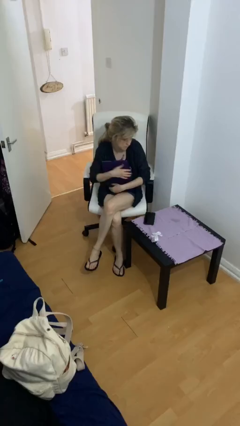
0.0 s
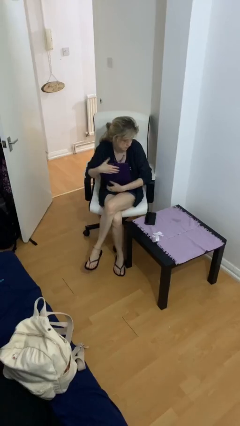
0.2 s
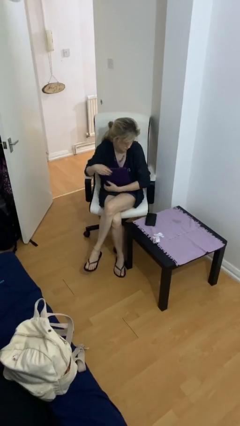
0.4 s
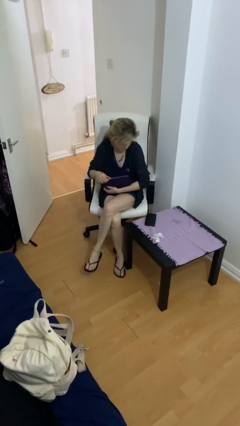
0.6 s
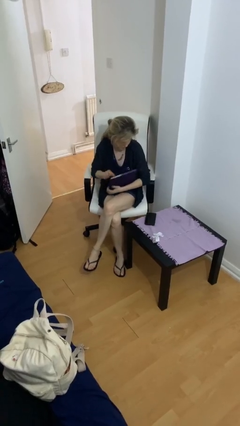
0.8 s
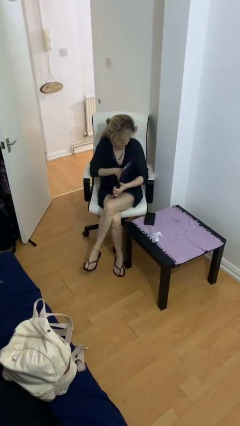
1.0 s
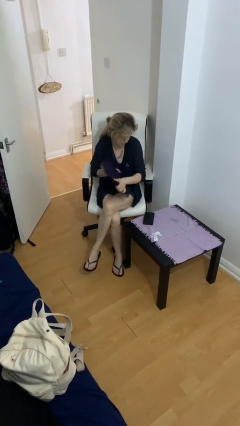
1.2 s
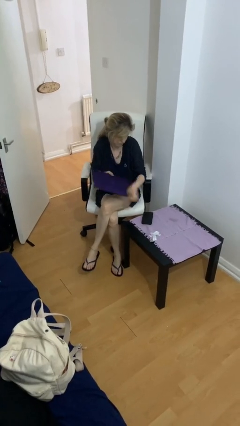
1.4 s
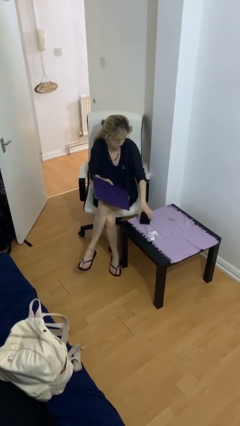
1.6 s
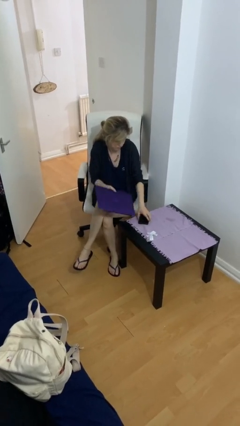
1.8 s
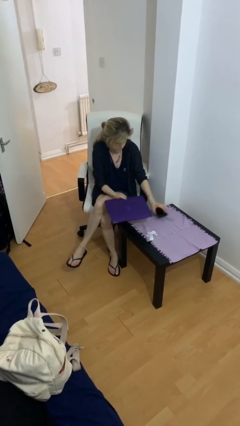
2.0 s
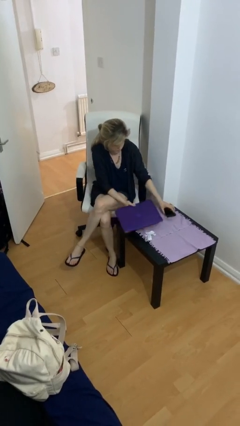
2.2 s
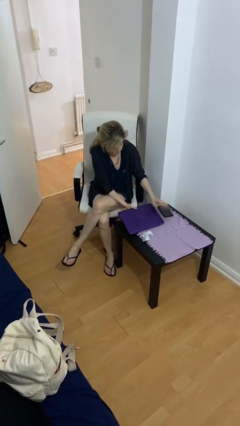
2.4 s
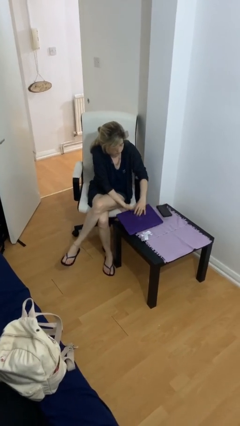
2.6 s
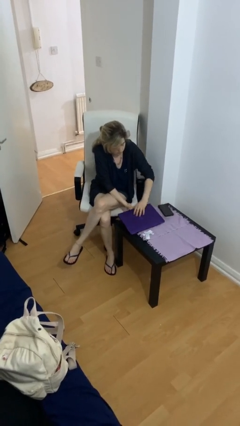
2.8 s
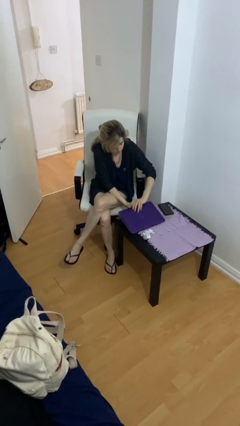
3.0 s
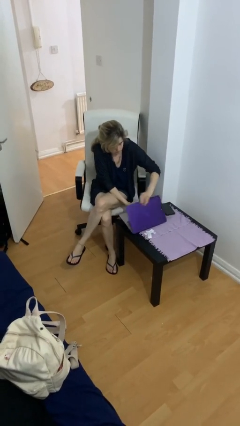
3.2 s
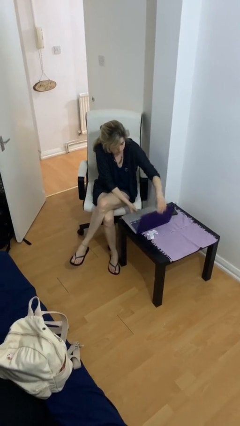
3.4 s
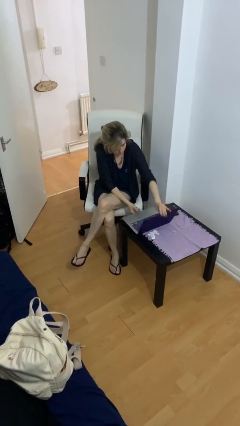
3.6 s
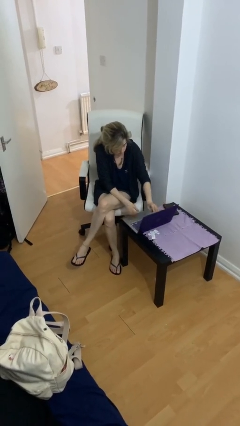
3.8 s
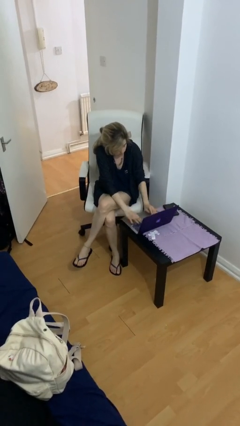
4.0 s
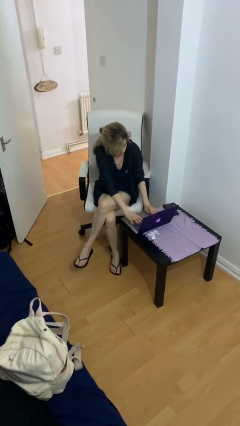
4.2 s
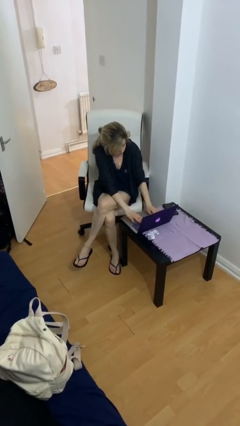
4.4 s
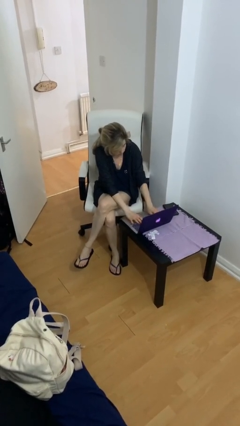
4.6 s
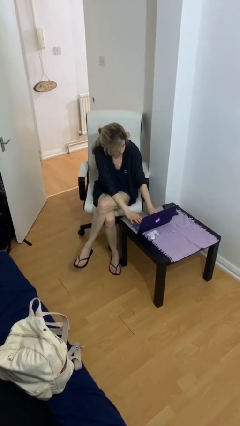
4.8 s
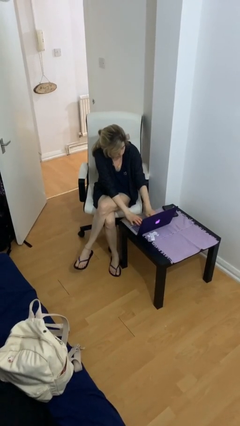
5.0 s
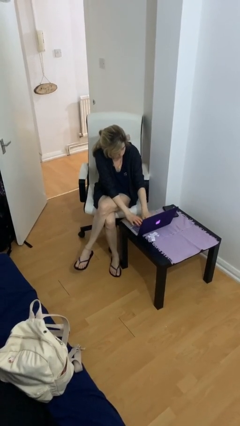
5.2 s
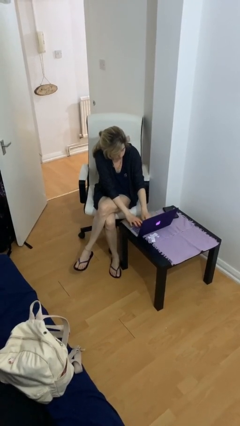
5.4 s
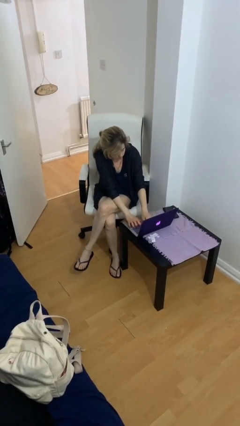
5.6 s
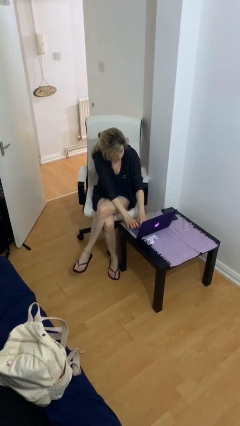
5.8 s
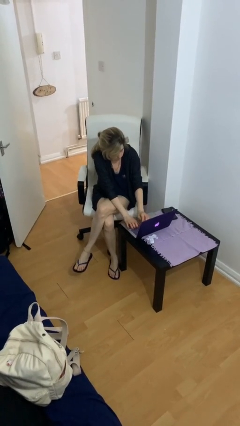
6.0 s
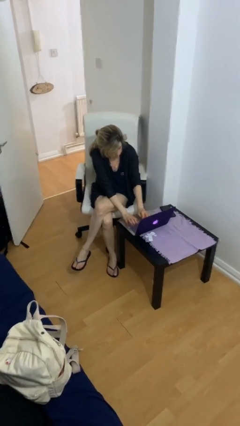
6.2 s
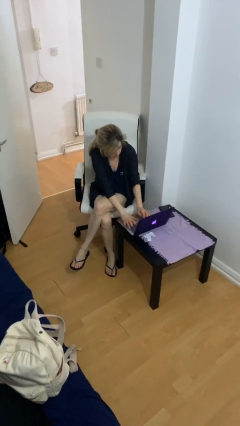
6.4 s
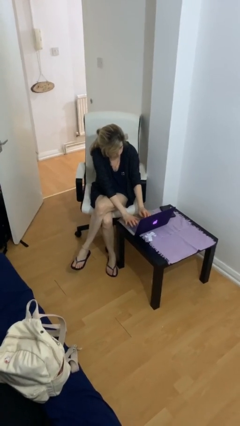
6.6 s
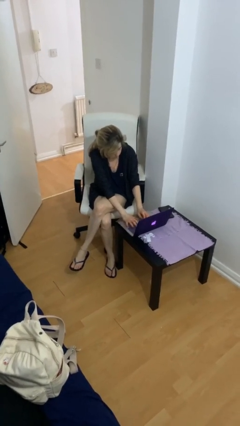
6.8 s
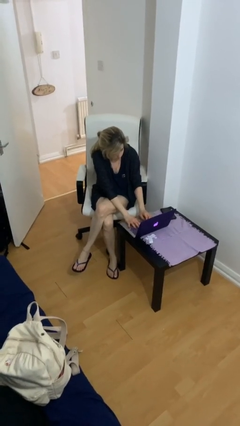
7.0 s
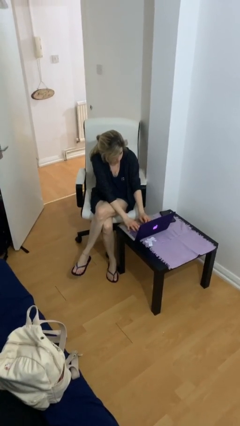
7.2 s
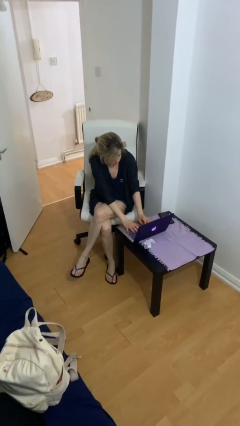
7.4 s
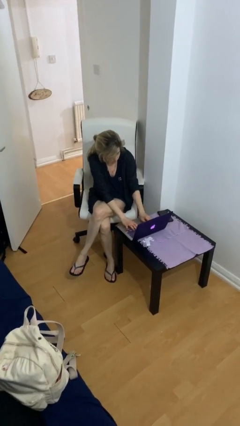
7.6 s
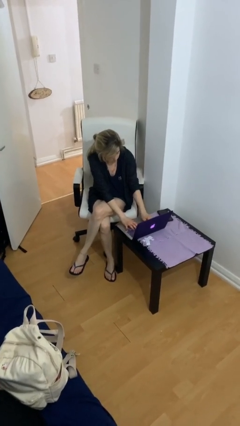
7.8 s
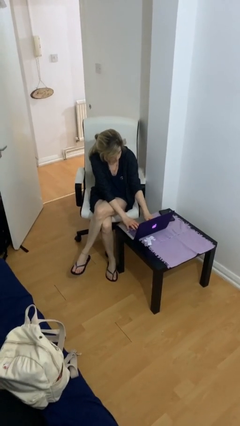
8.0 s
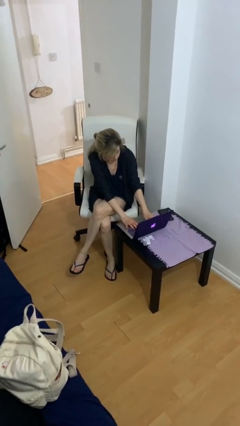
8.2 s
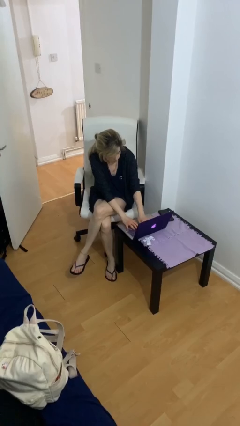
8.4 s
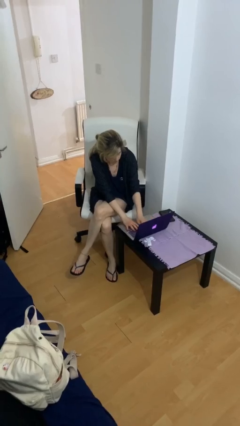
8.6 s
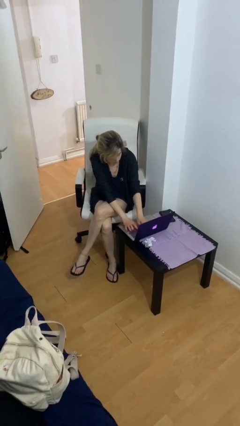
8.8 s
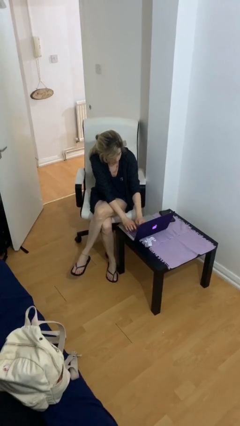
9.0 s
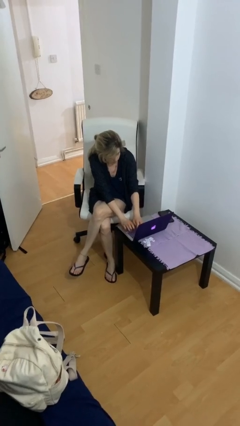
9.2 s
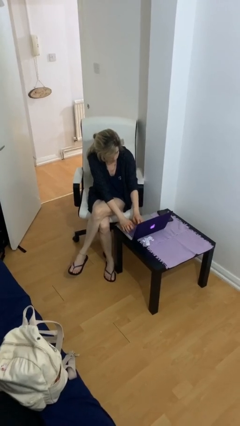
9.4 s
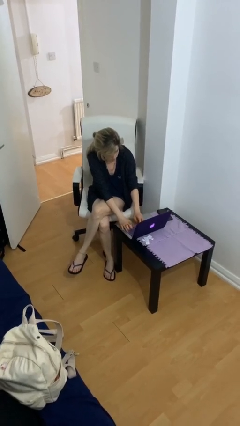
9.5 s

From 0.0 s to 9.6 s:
person interacts with laptop

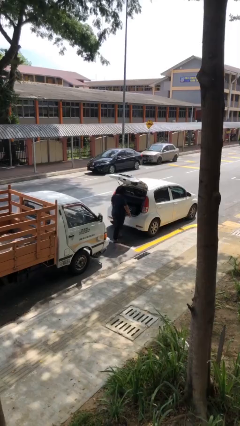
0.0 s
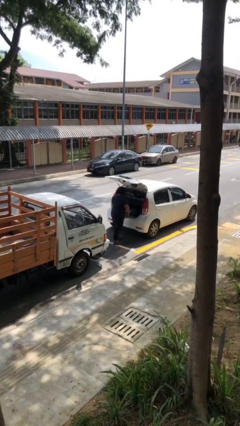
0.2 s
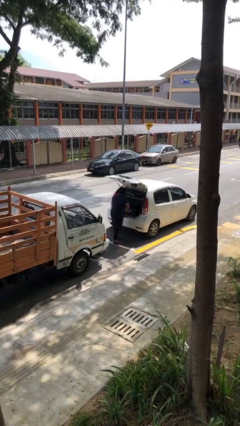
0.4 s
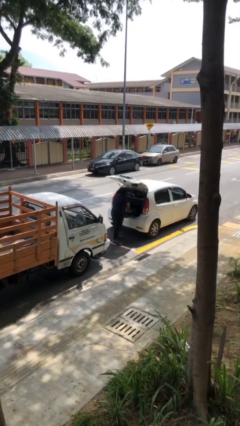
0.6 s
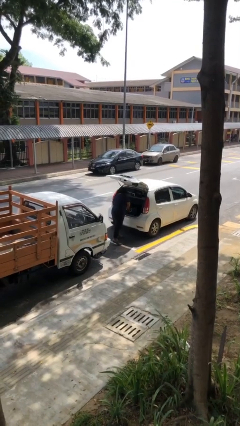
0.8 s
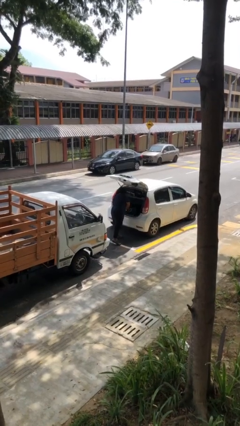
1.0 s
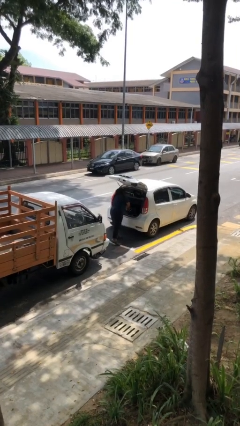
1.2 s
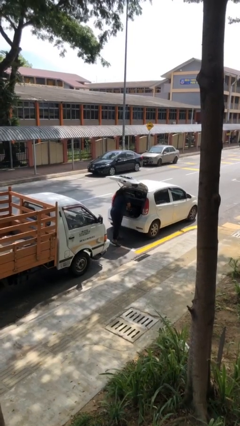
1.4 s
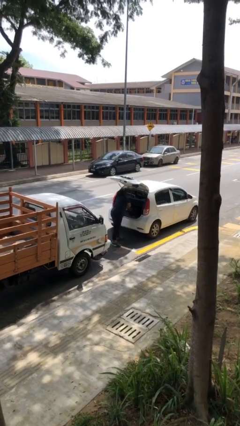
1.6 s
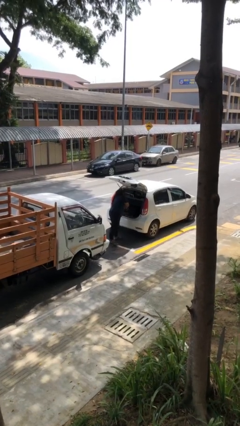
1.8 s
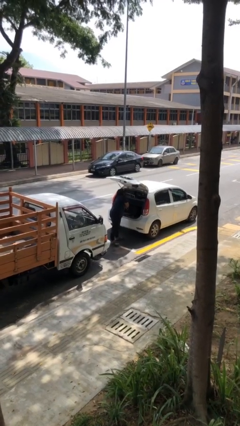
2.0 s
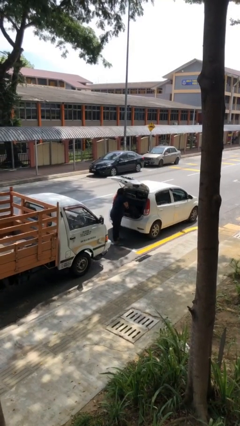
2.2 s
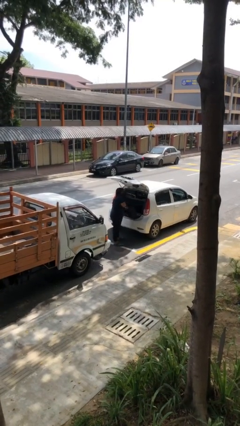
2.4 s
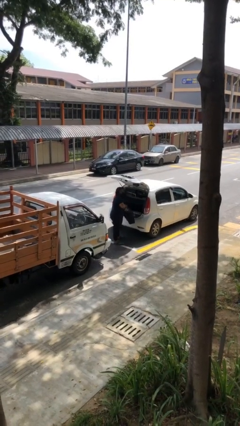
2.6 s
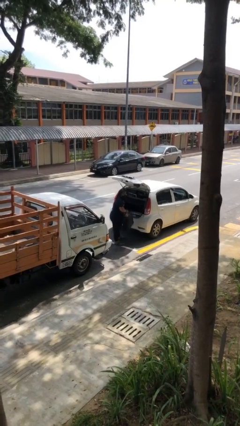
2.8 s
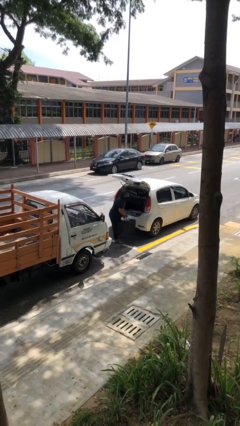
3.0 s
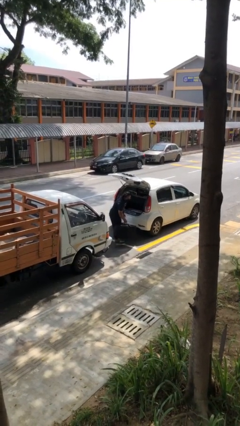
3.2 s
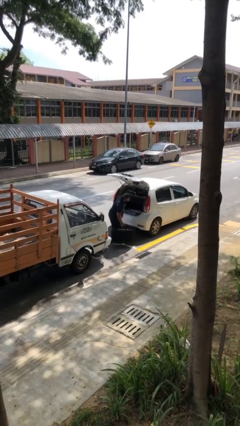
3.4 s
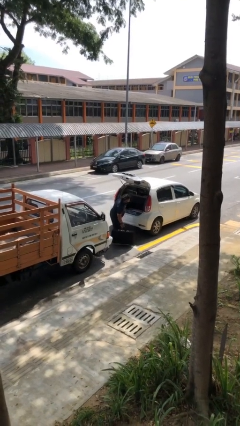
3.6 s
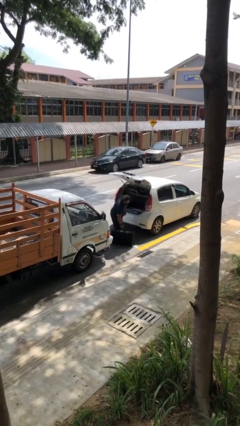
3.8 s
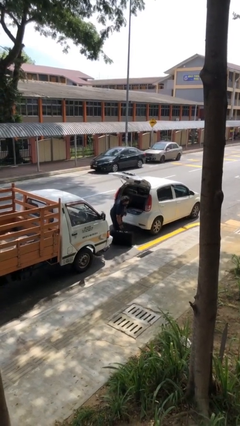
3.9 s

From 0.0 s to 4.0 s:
person unloads car

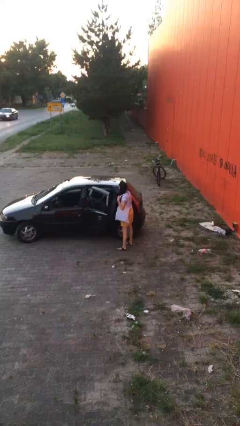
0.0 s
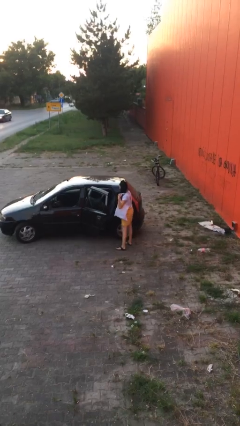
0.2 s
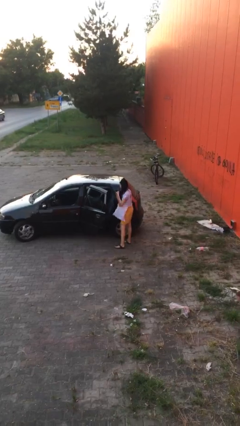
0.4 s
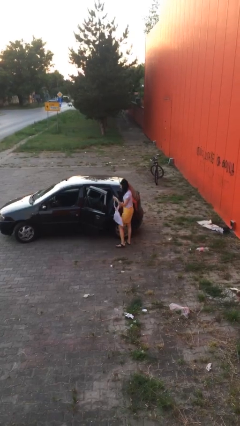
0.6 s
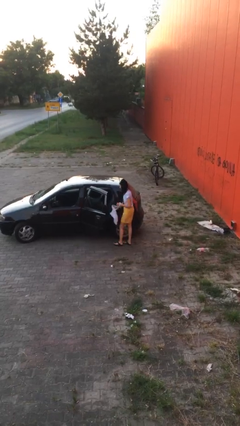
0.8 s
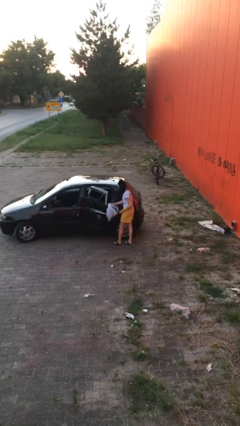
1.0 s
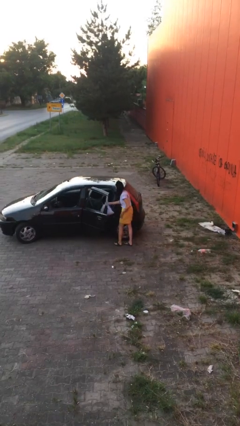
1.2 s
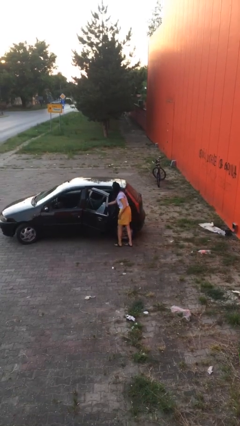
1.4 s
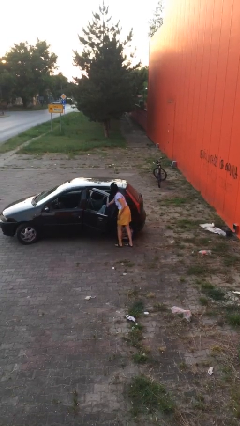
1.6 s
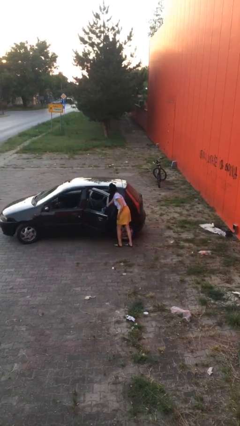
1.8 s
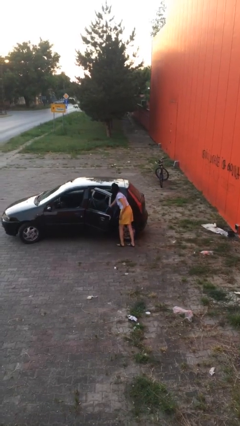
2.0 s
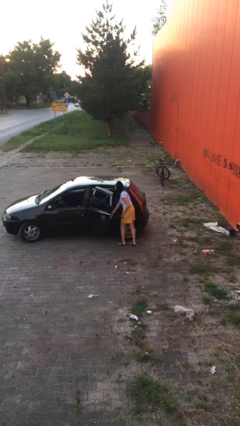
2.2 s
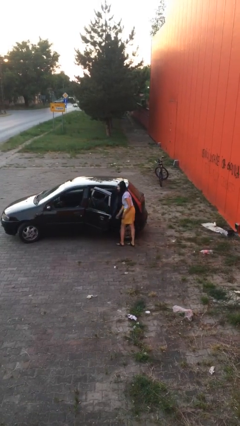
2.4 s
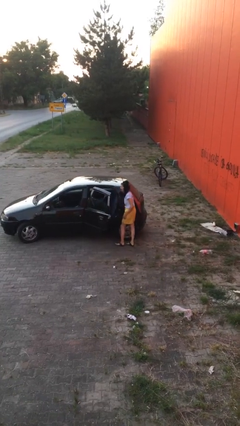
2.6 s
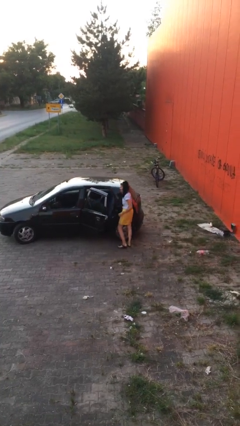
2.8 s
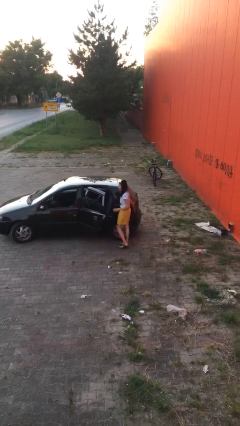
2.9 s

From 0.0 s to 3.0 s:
person loads car

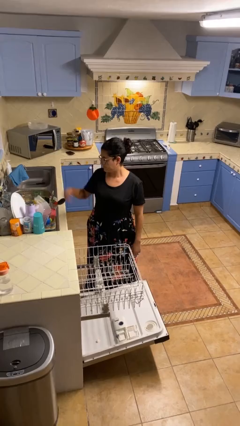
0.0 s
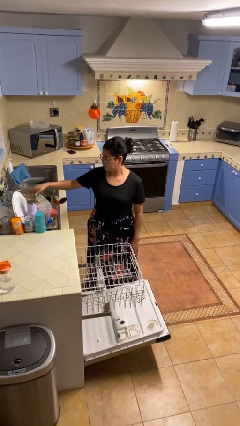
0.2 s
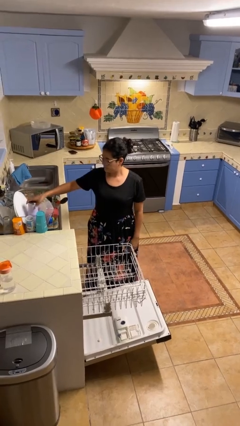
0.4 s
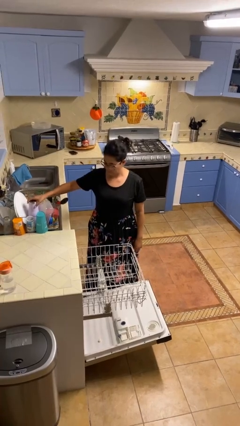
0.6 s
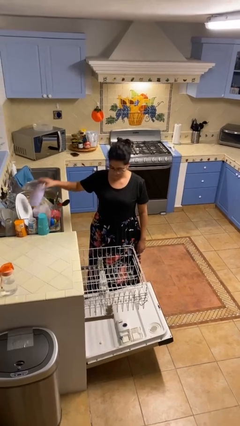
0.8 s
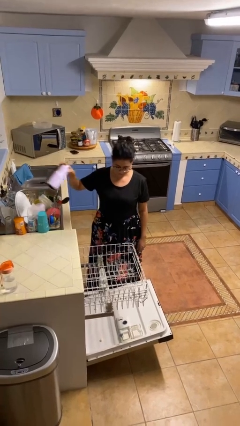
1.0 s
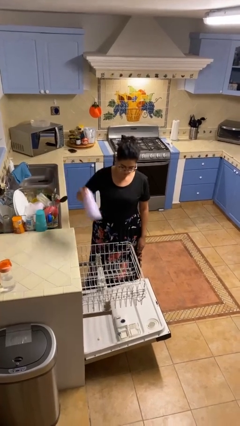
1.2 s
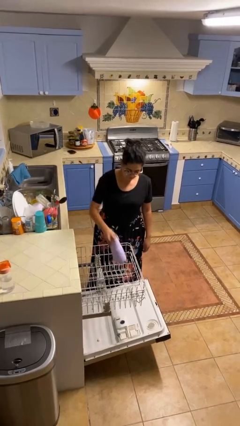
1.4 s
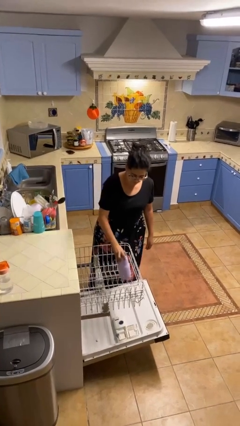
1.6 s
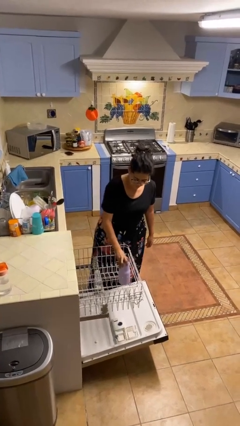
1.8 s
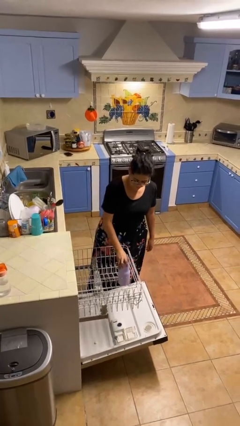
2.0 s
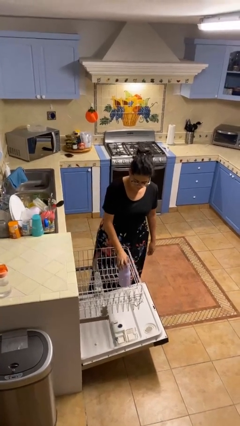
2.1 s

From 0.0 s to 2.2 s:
person loads dishwasher
